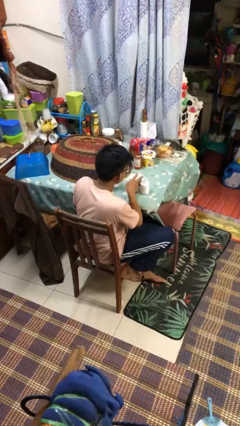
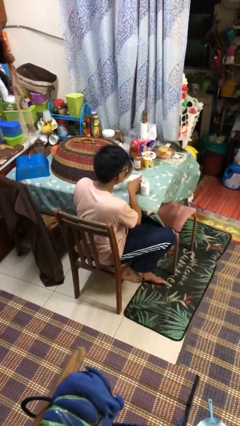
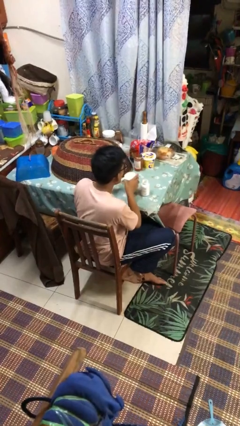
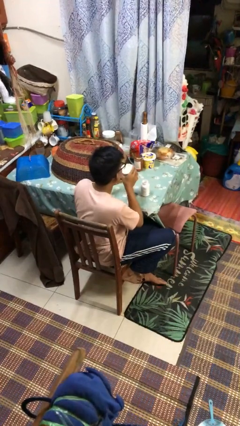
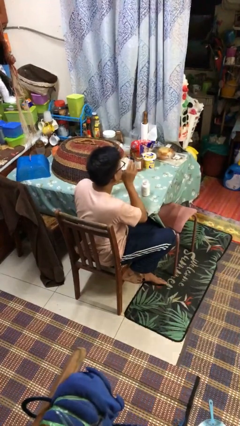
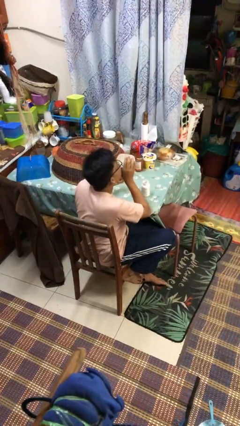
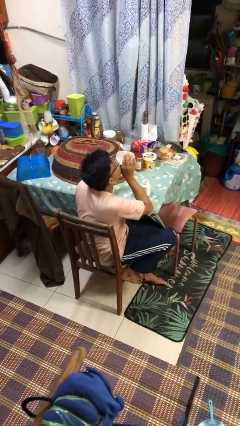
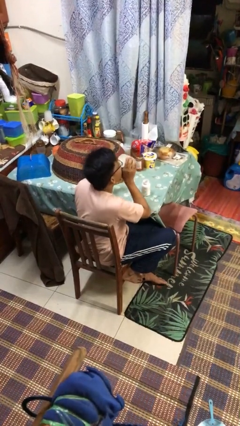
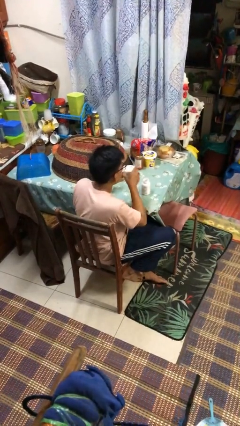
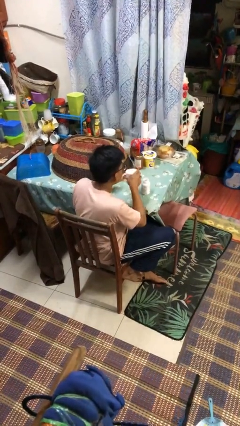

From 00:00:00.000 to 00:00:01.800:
person drinks from cup

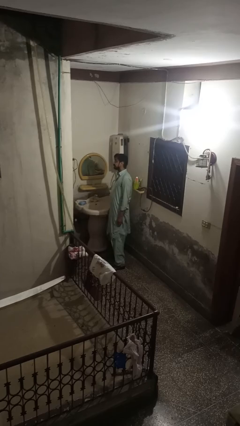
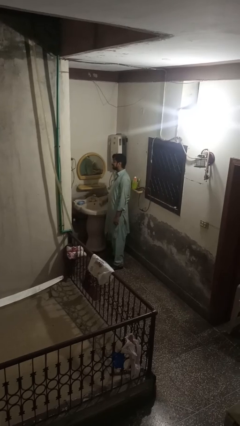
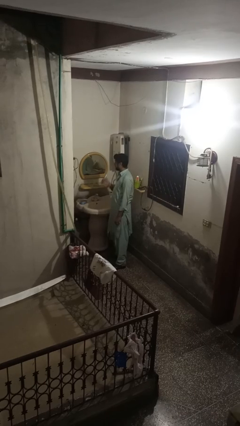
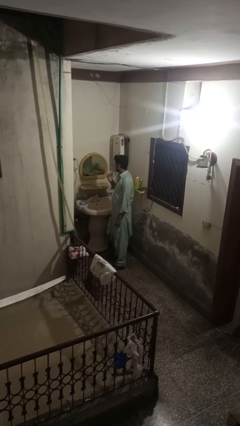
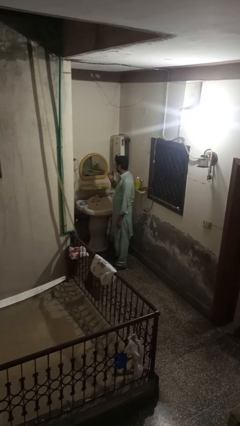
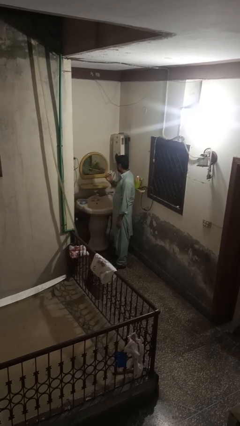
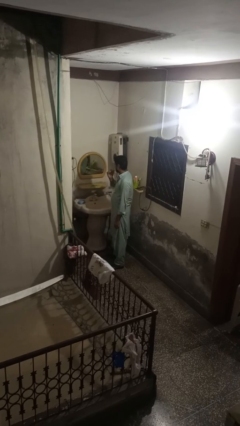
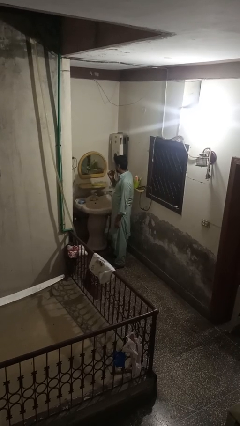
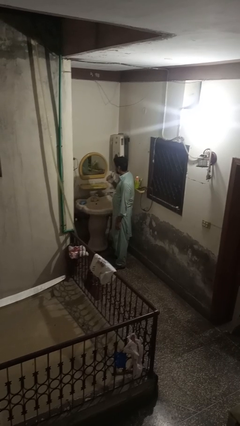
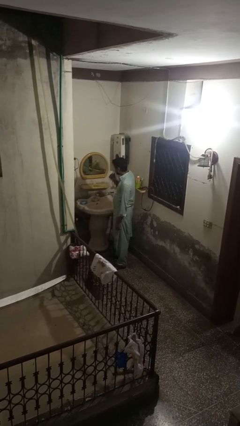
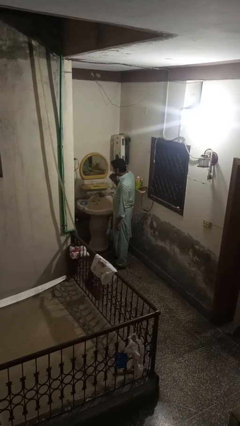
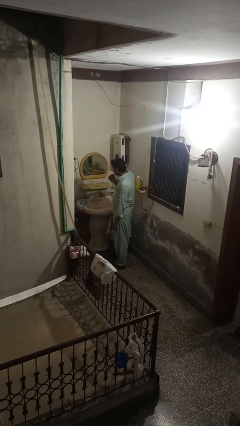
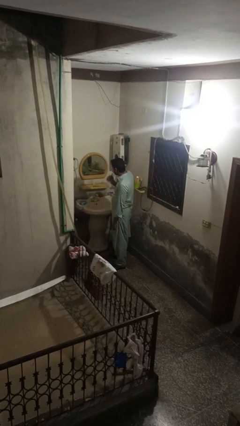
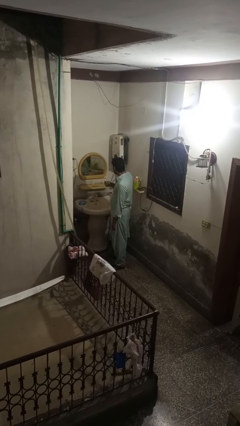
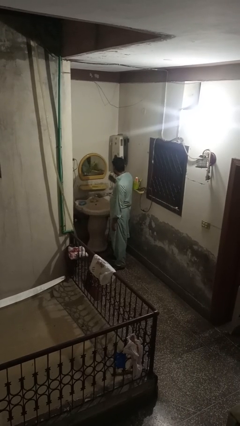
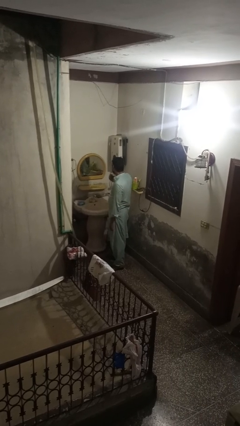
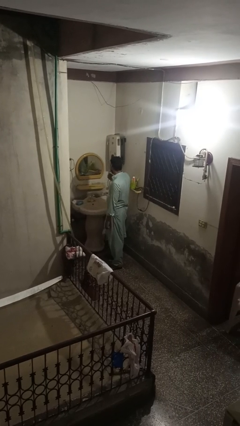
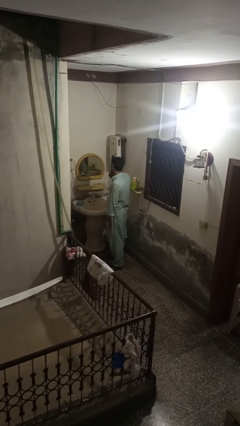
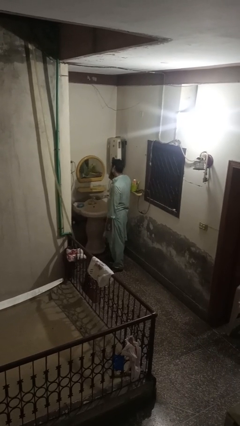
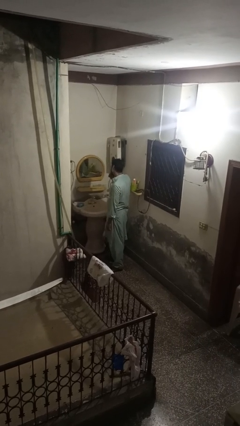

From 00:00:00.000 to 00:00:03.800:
person brushes teeth

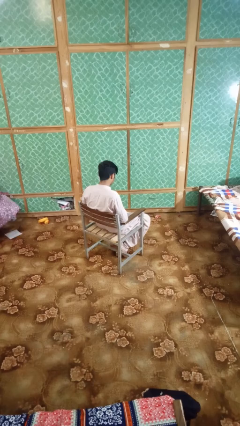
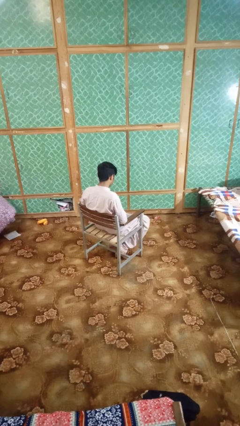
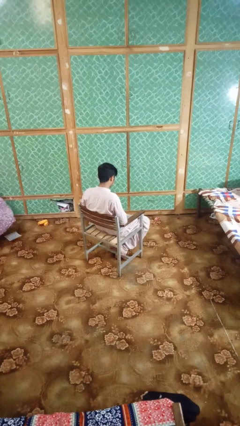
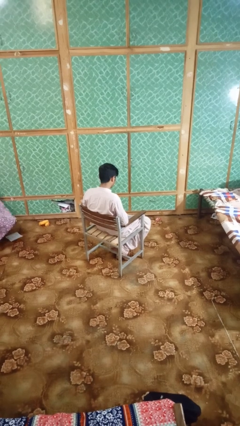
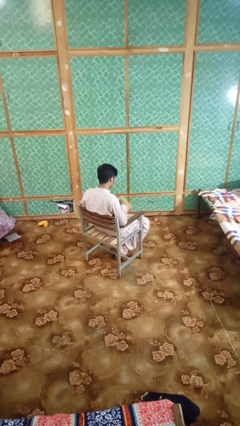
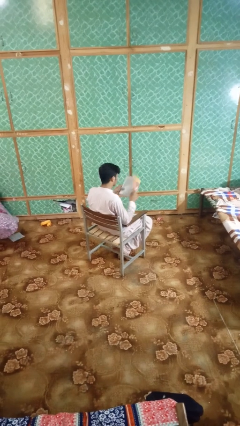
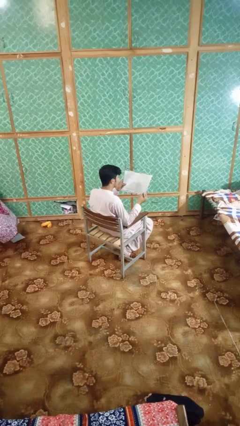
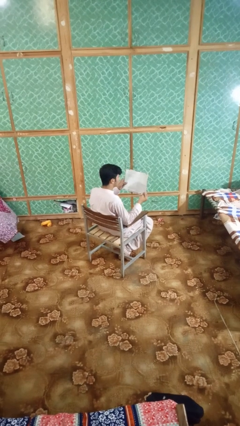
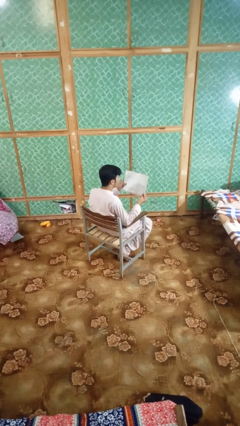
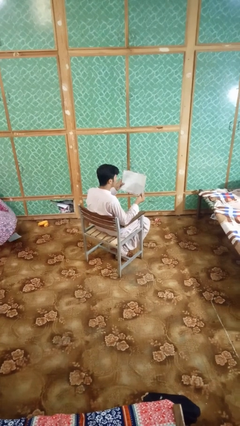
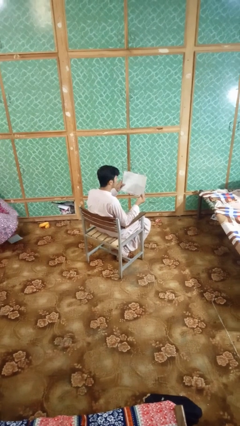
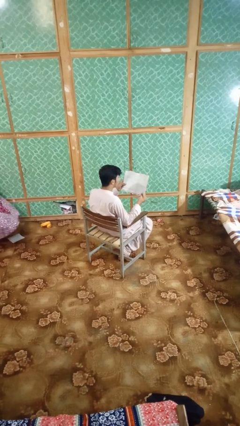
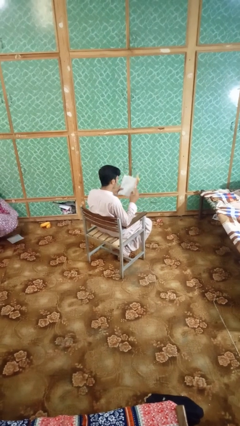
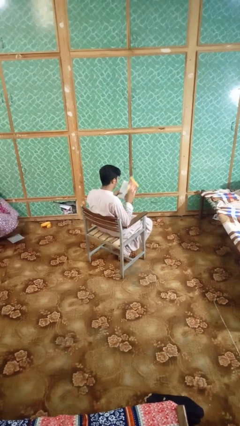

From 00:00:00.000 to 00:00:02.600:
person reads book

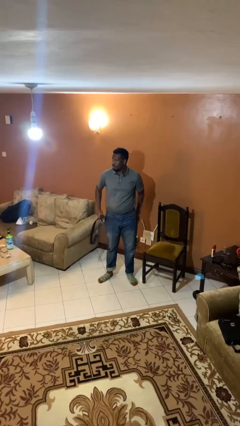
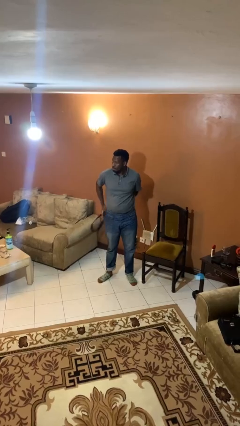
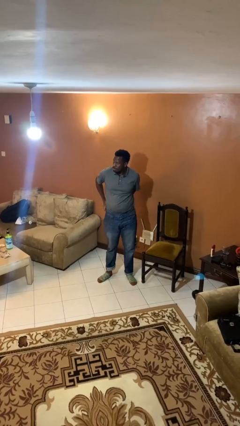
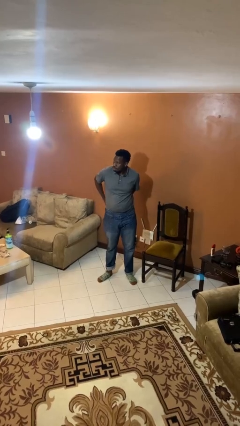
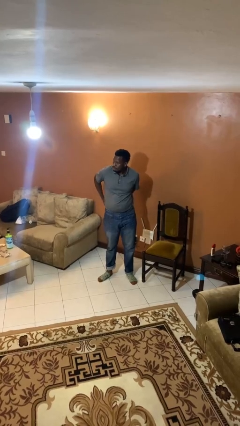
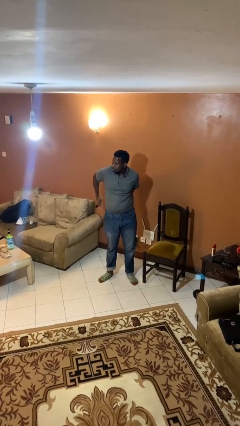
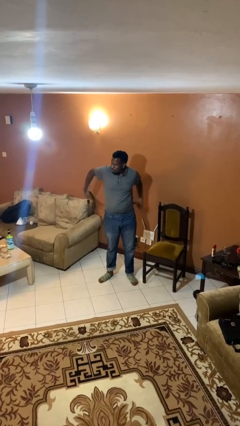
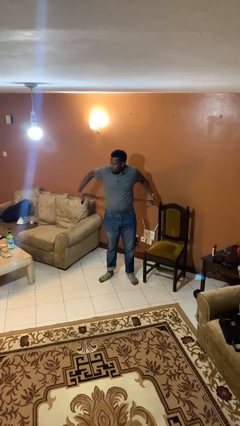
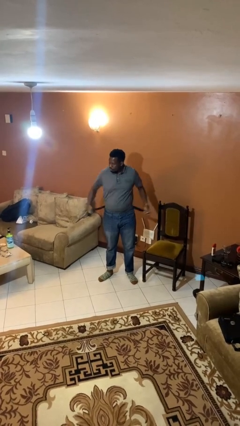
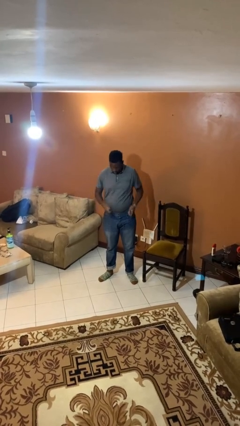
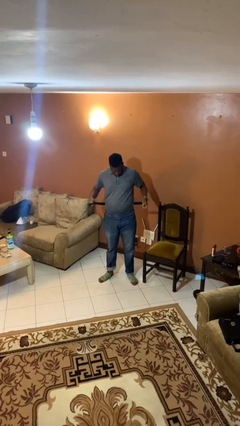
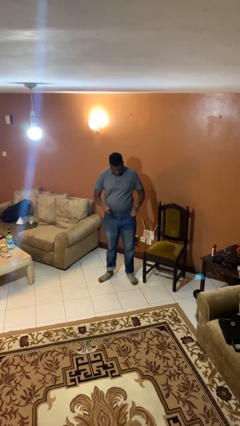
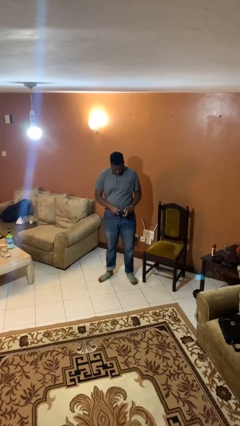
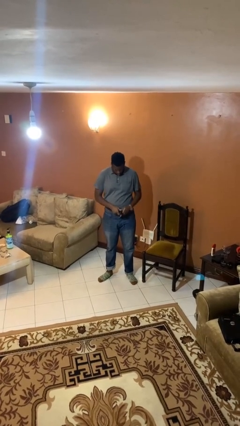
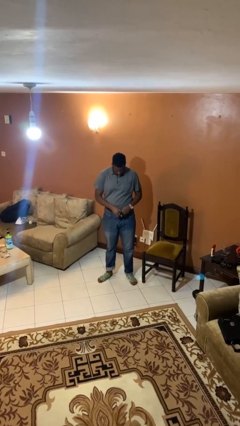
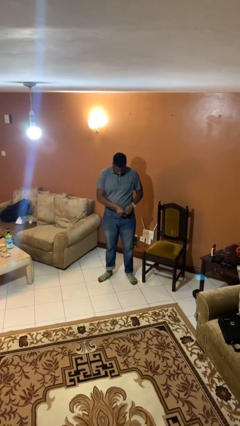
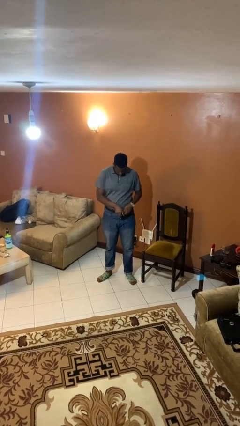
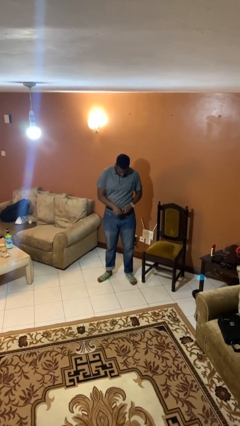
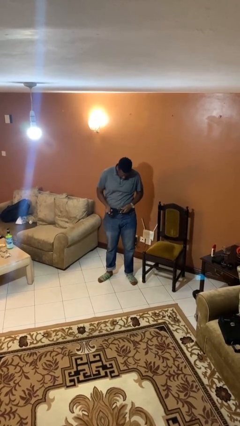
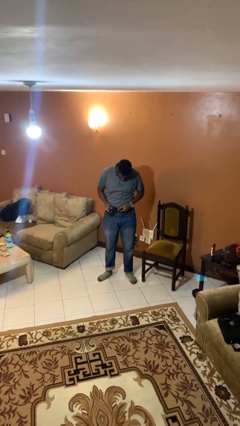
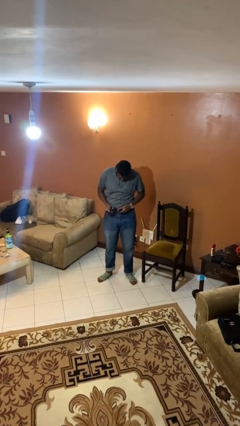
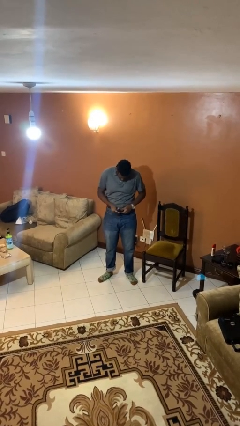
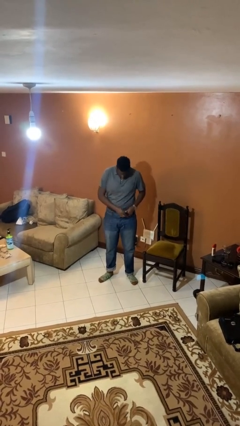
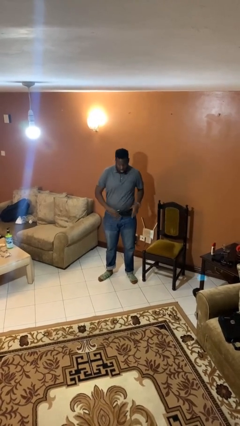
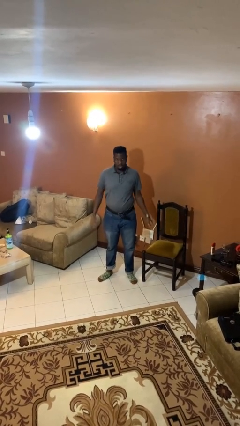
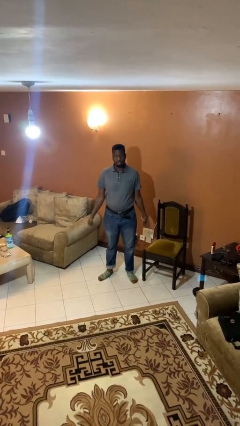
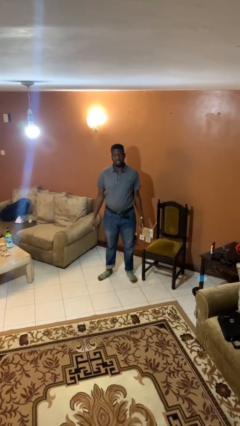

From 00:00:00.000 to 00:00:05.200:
person puts on belt

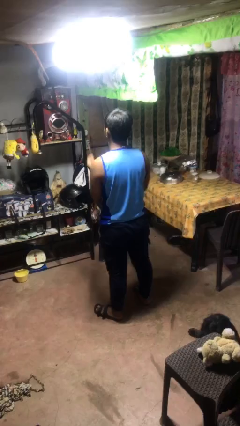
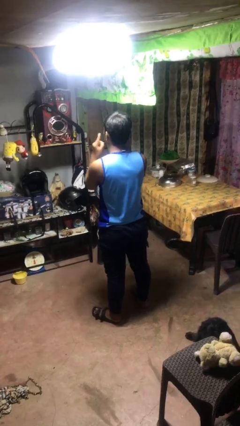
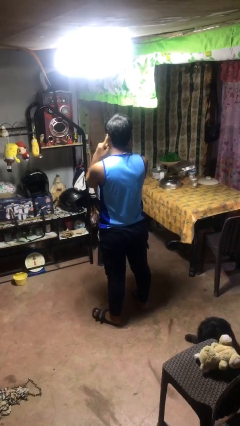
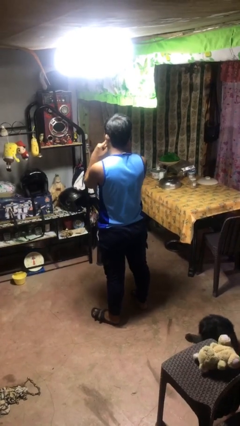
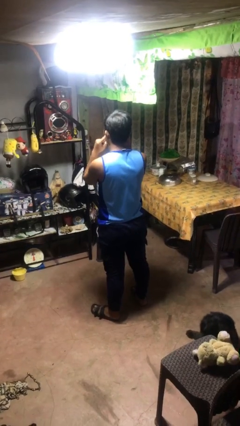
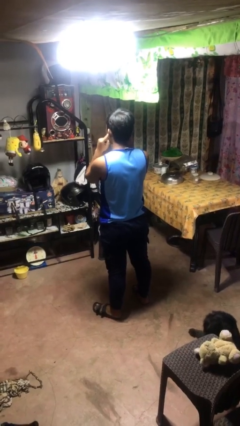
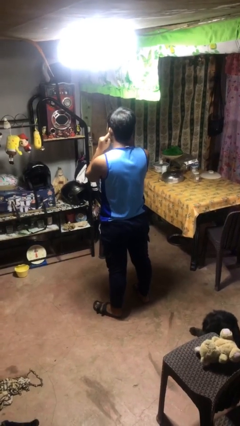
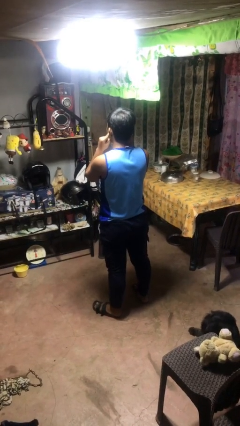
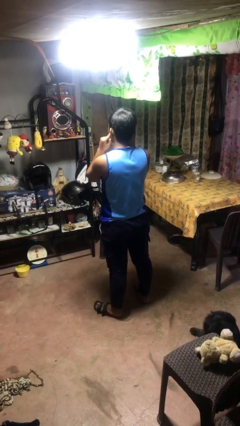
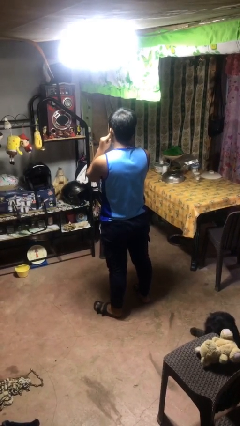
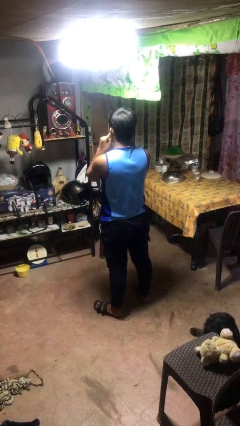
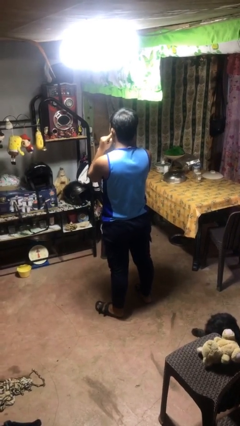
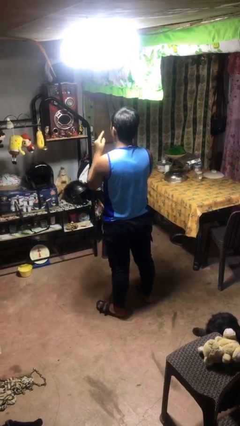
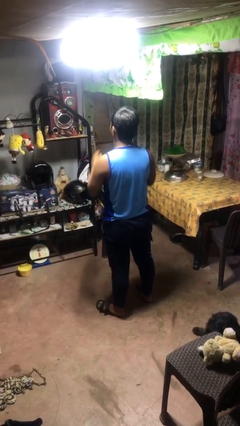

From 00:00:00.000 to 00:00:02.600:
person puts fingers in ear

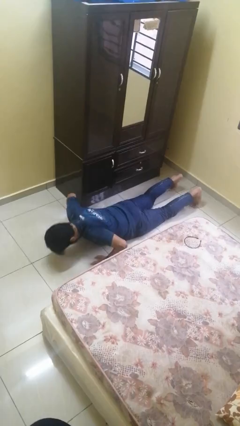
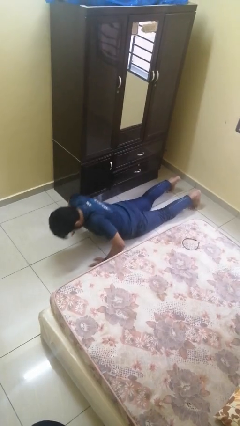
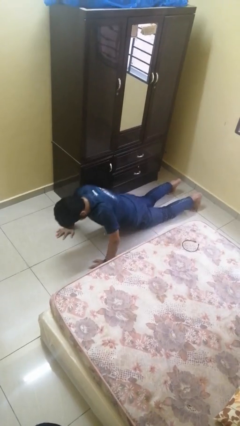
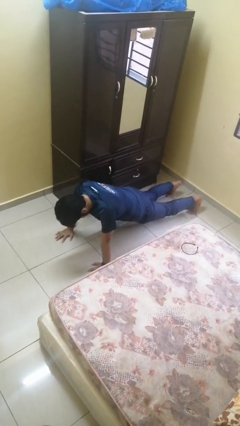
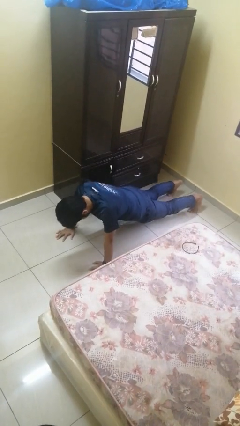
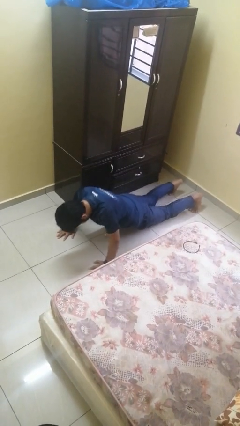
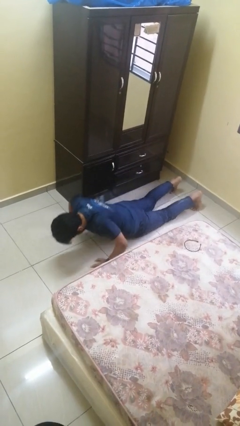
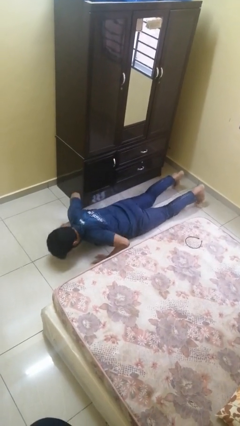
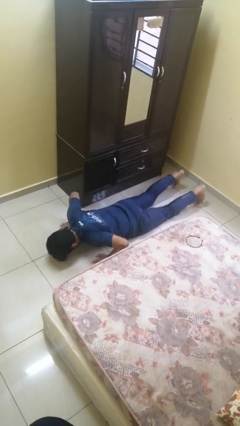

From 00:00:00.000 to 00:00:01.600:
person exercises with pushup
